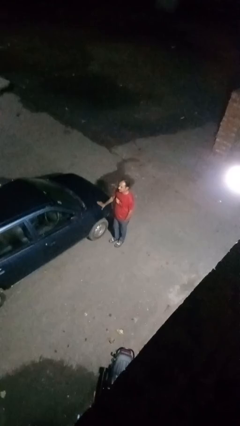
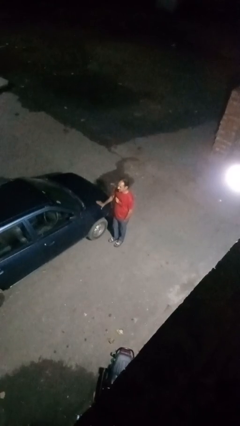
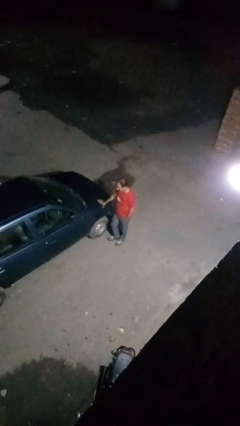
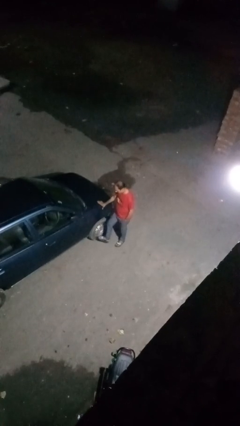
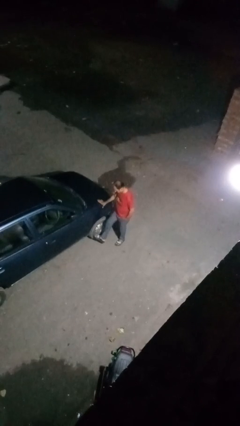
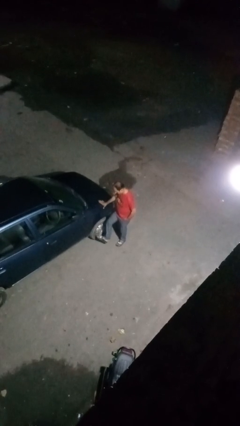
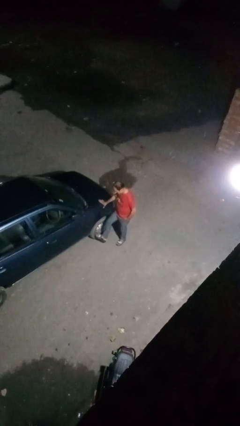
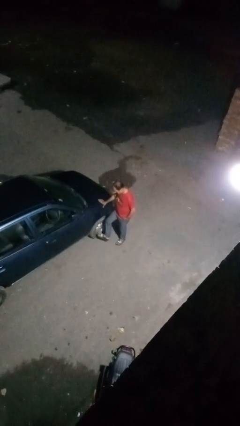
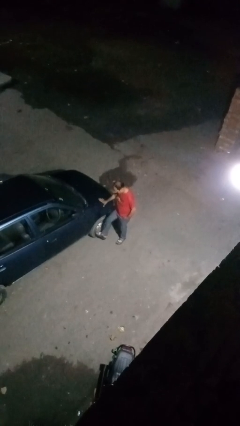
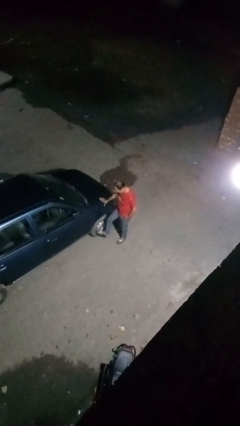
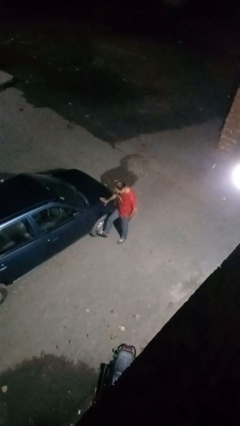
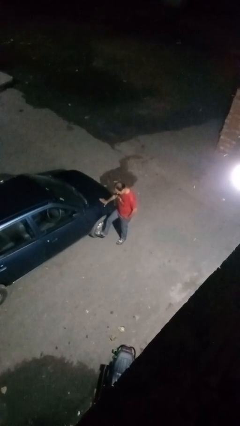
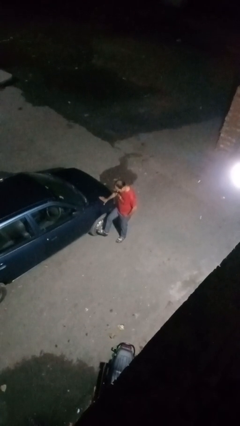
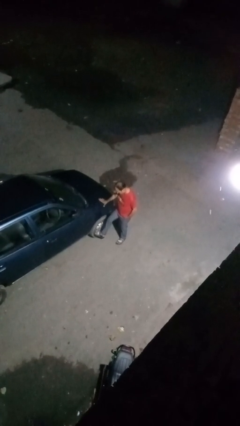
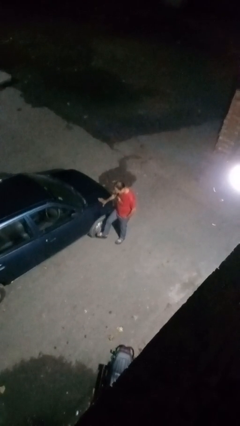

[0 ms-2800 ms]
person kicks car tires

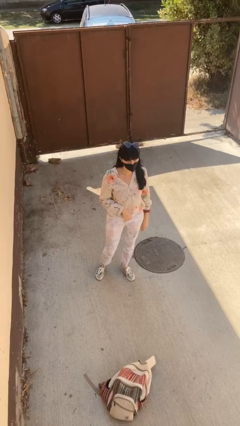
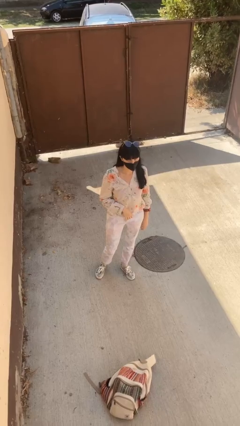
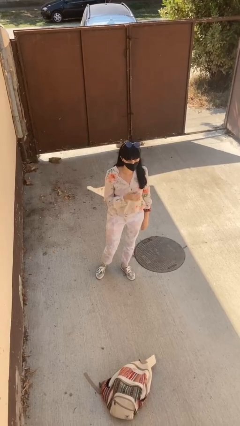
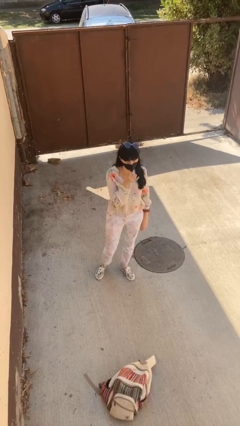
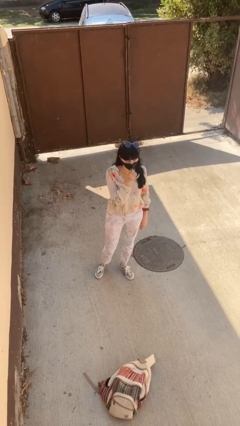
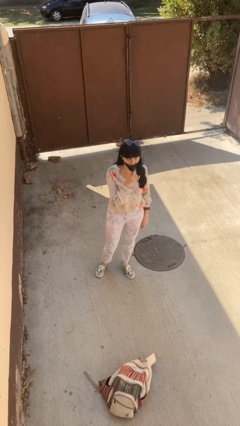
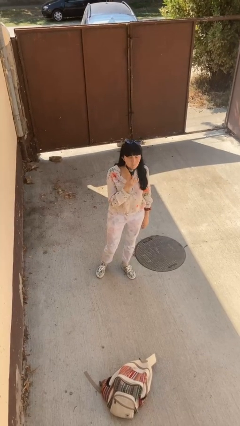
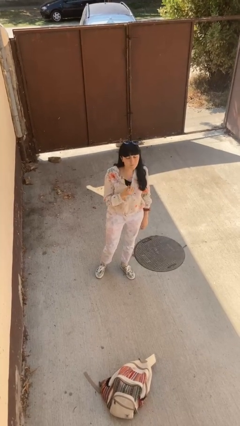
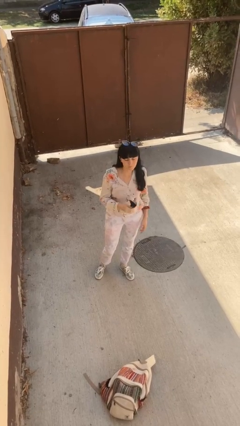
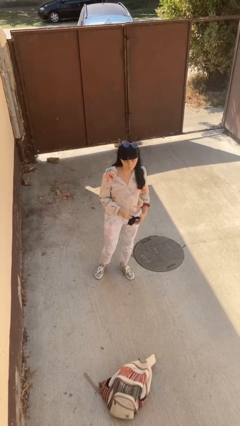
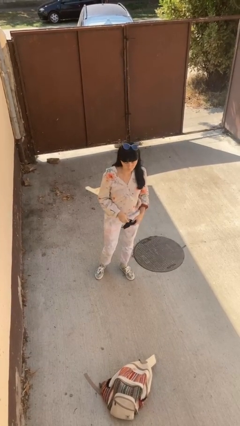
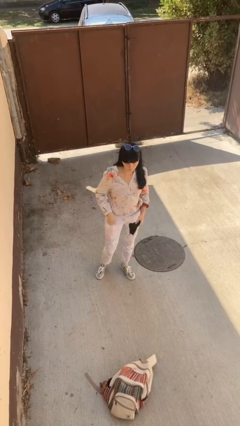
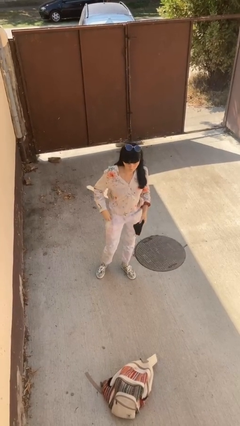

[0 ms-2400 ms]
person takes off facemask

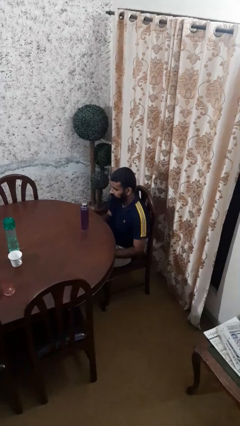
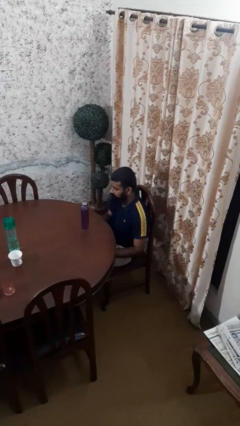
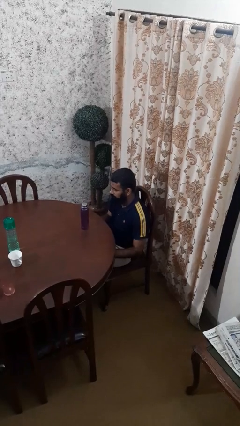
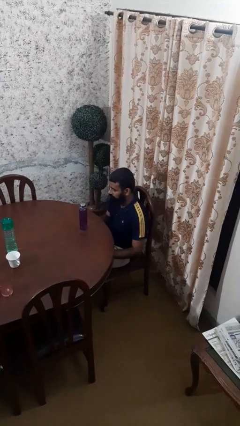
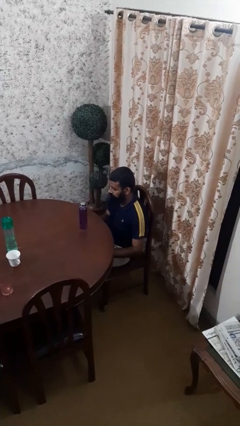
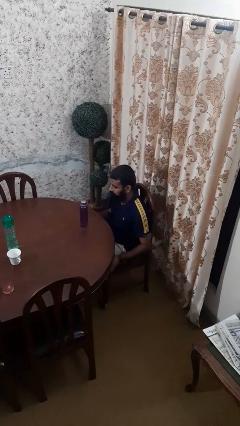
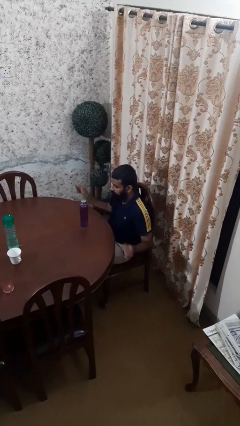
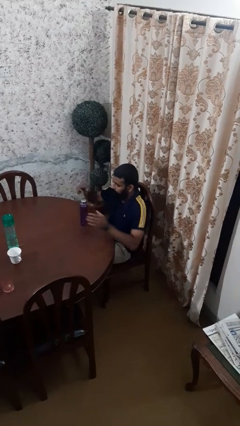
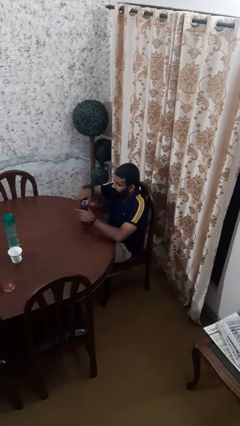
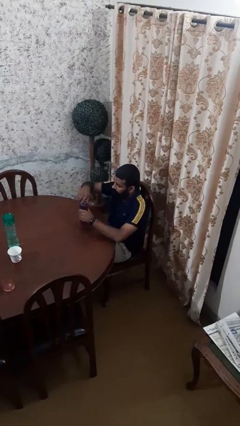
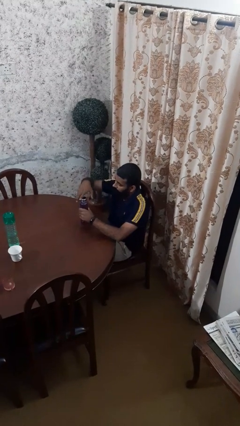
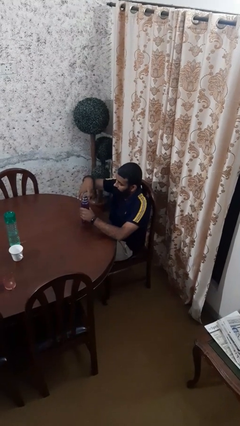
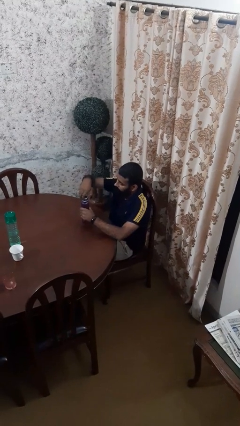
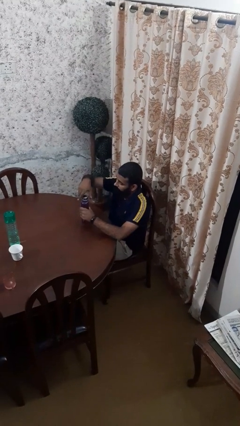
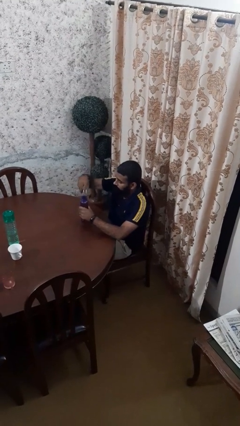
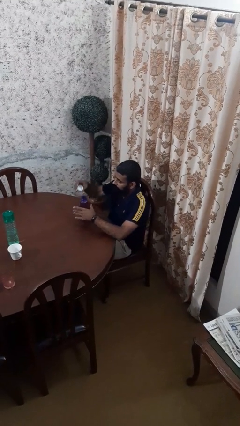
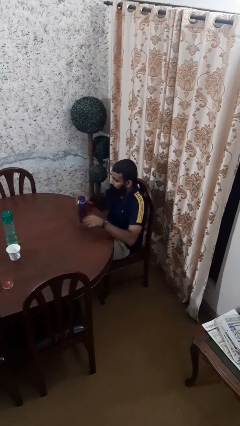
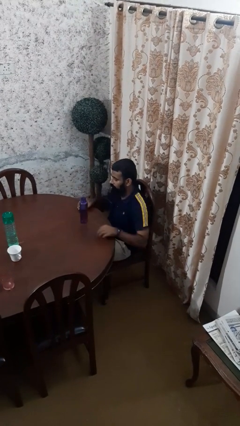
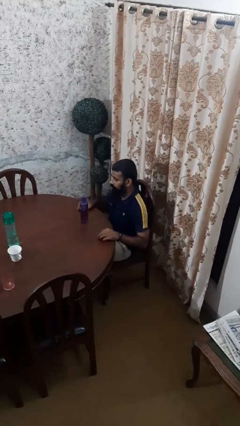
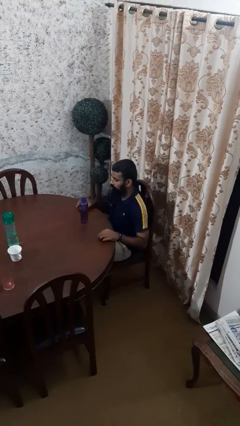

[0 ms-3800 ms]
person unscrews lid from bottle

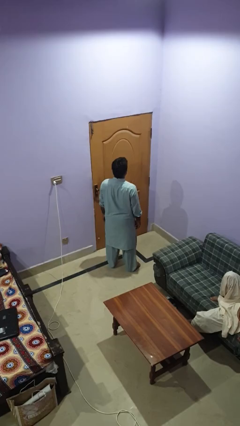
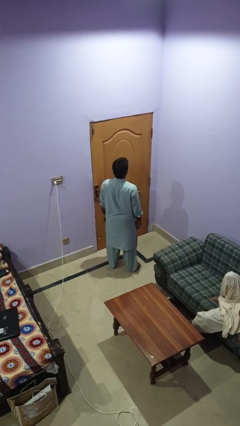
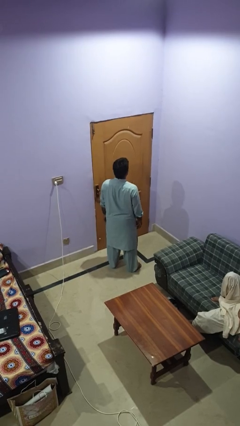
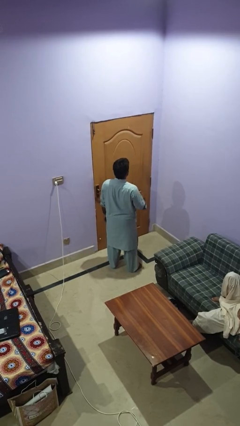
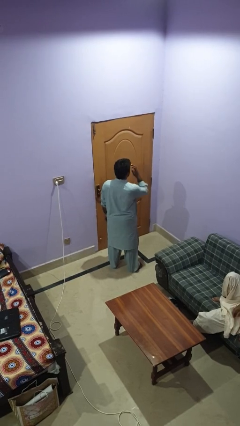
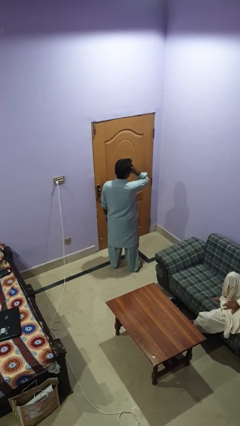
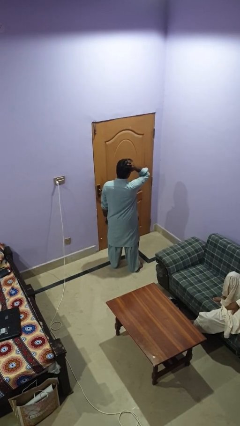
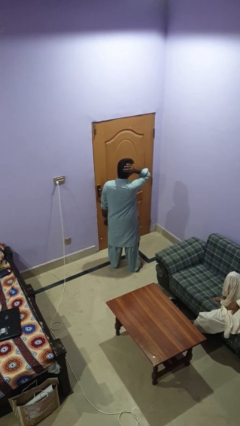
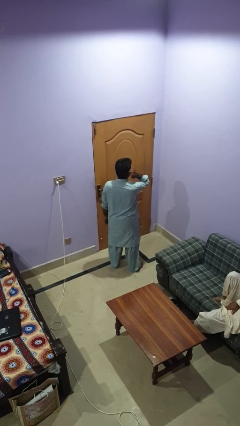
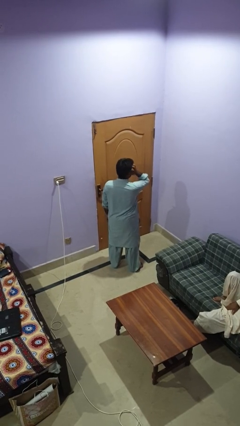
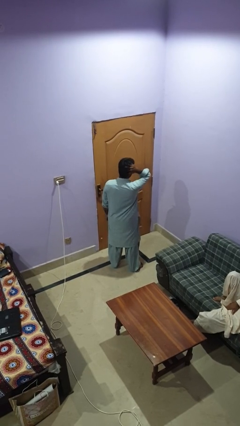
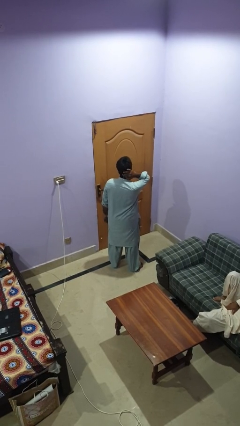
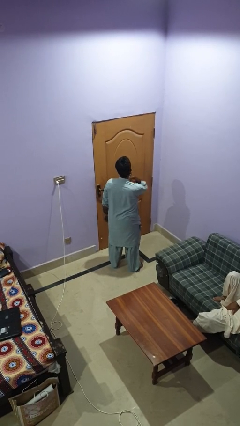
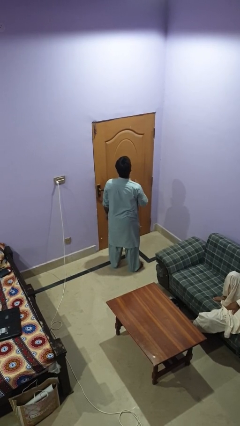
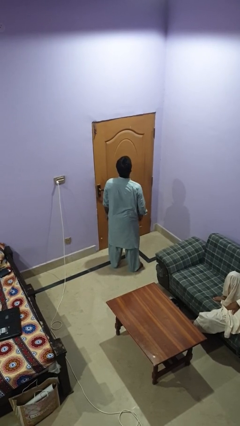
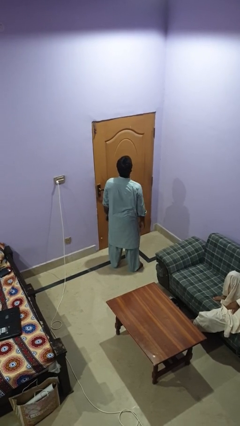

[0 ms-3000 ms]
person strokes hair

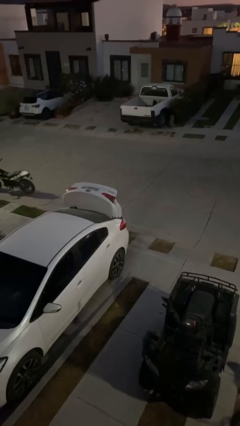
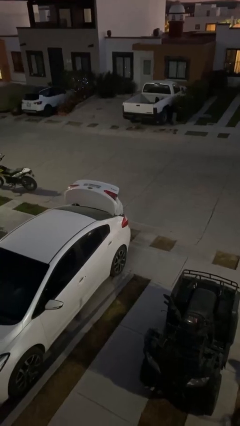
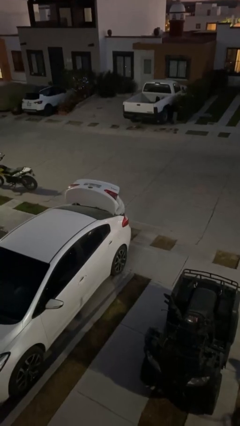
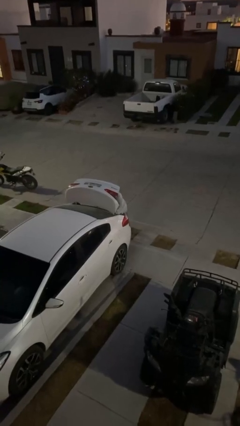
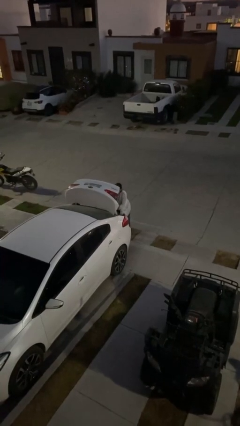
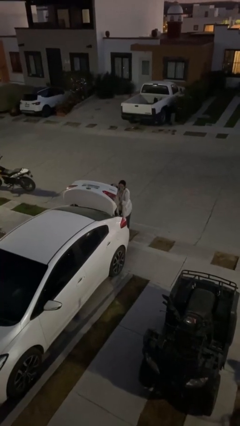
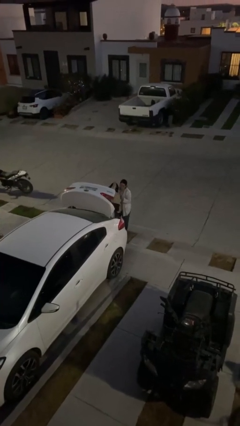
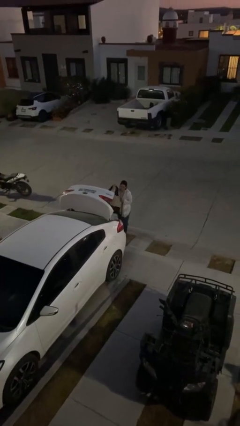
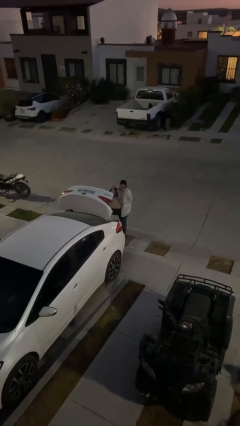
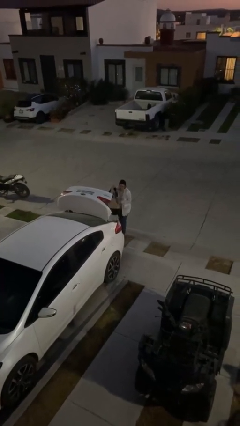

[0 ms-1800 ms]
person unloads car

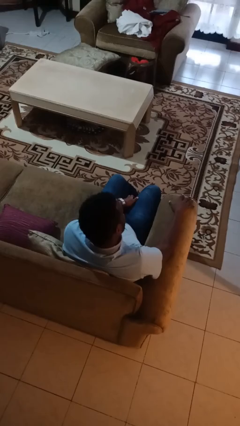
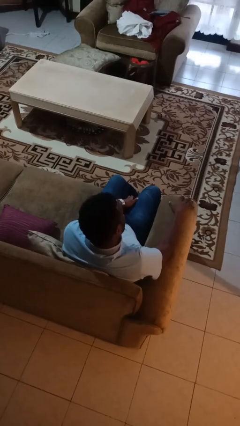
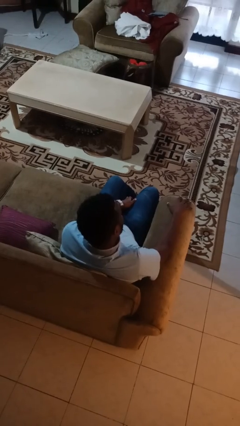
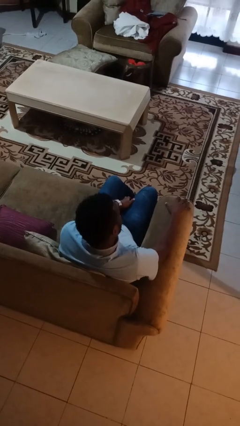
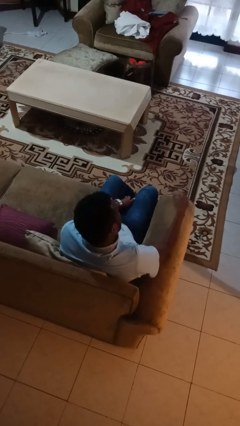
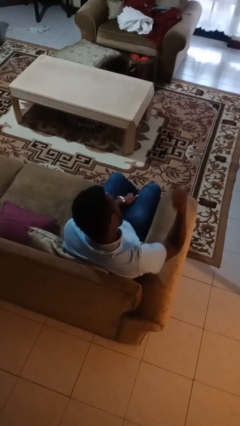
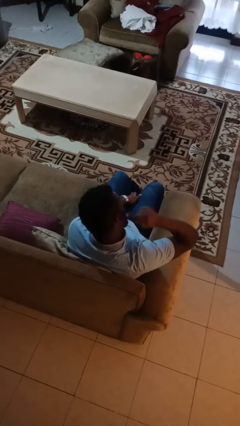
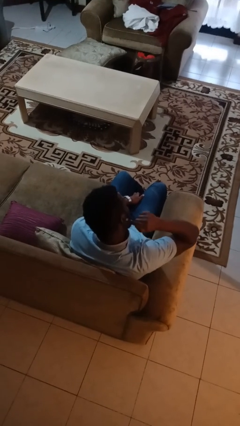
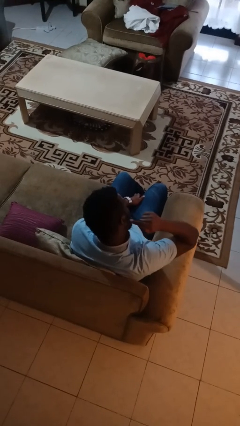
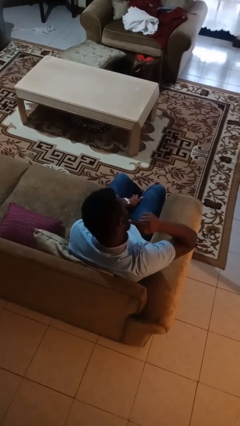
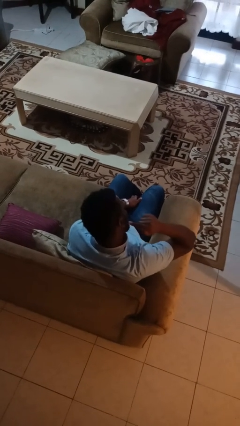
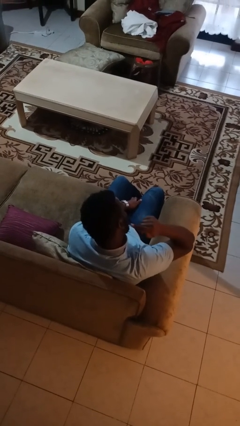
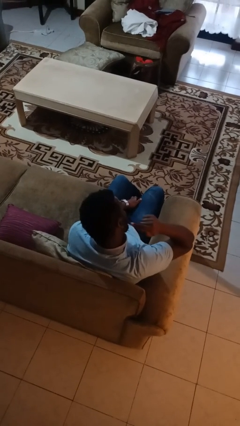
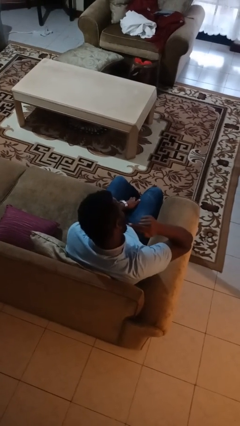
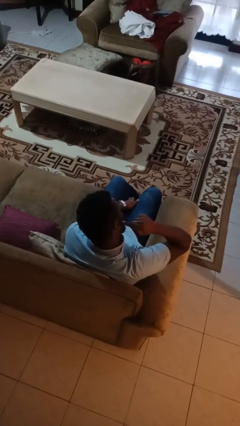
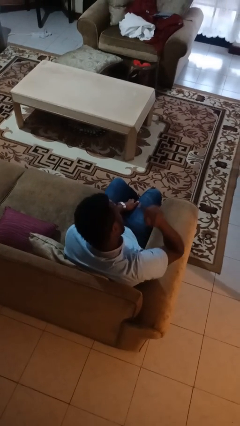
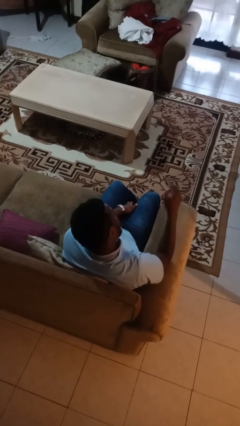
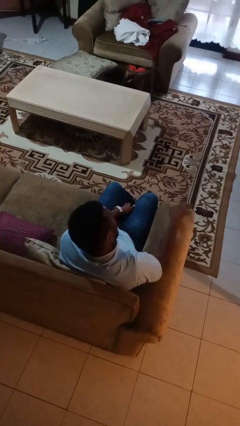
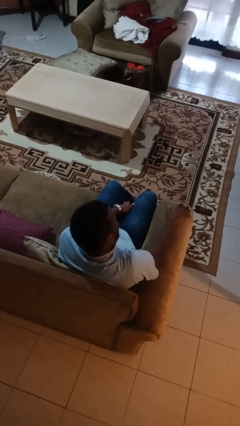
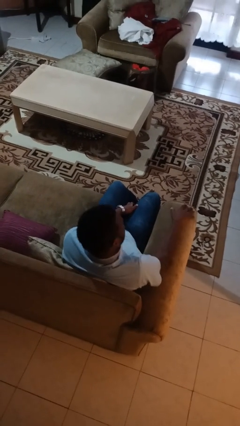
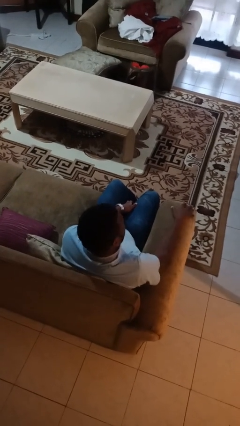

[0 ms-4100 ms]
person gestures listen closely
